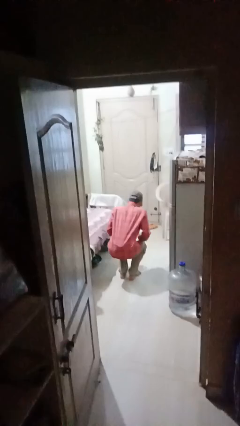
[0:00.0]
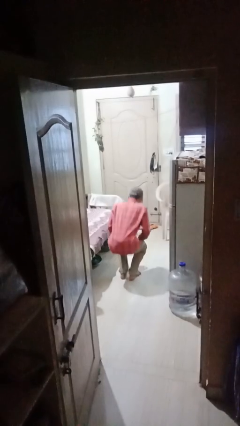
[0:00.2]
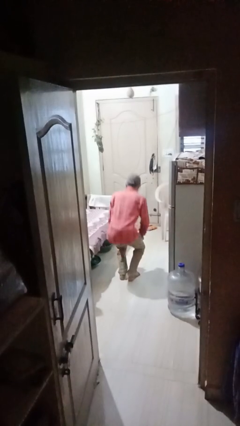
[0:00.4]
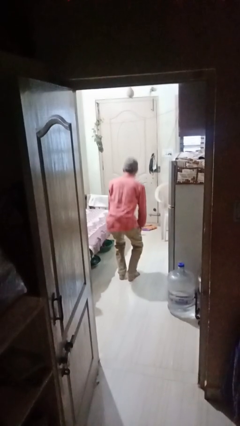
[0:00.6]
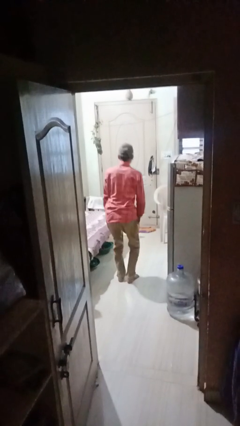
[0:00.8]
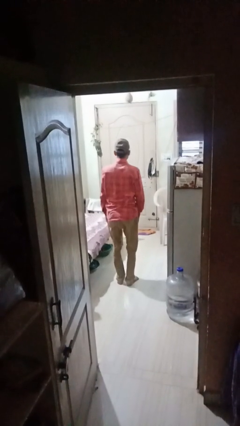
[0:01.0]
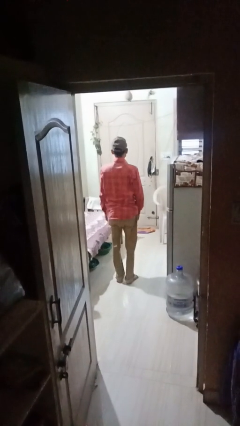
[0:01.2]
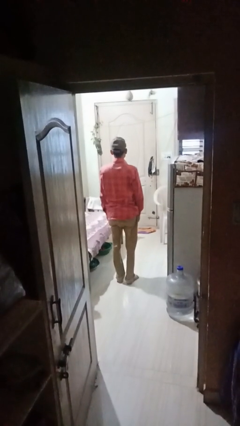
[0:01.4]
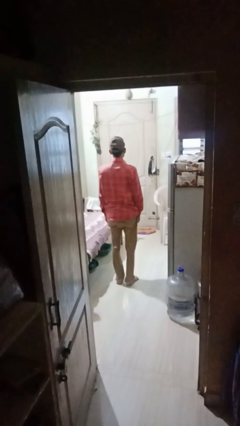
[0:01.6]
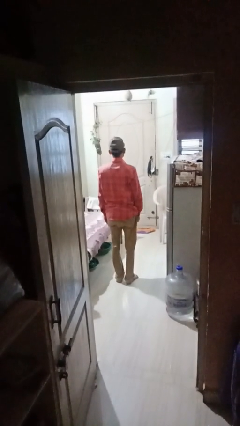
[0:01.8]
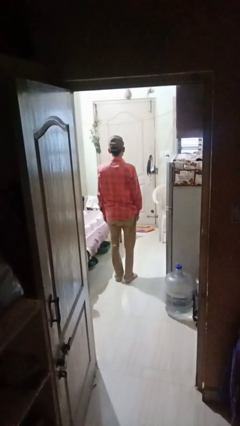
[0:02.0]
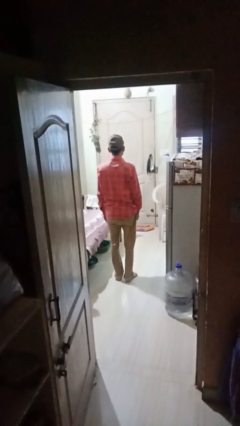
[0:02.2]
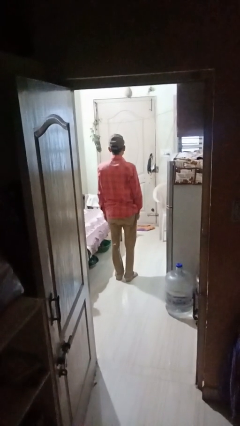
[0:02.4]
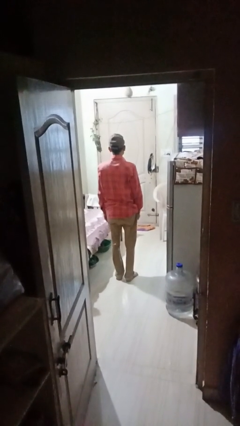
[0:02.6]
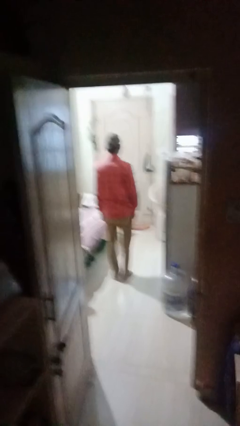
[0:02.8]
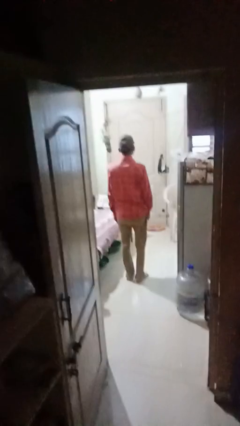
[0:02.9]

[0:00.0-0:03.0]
person stands up

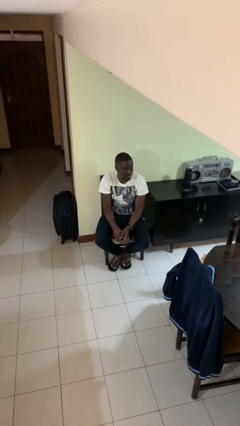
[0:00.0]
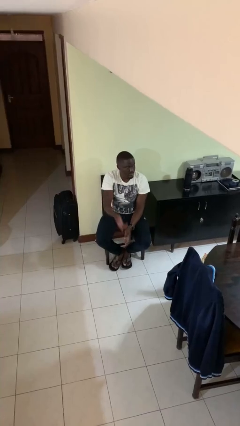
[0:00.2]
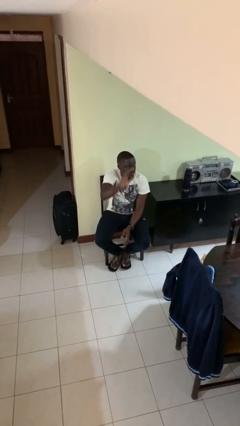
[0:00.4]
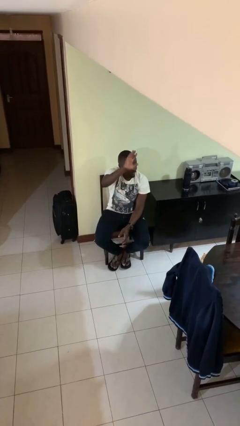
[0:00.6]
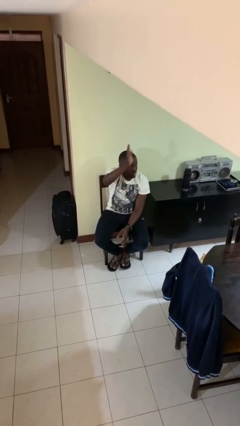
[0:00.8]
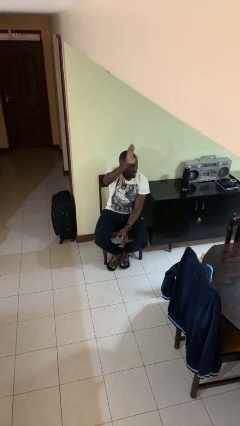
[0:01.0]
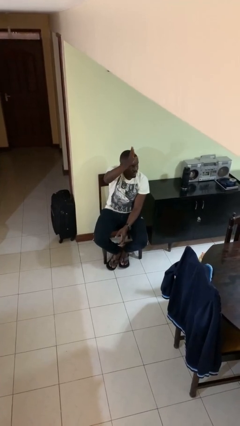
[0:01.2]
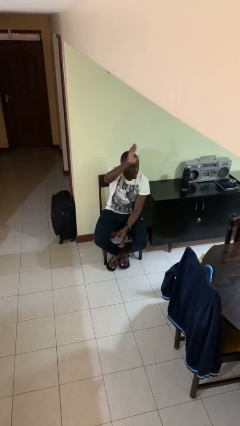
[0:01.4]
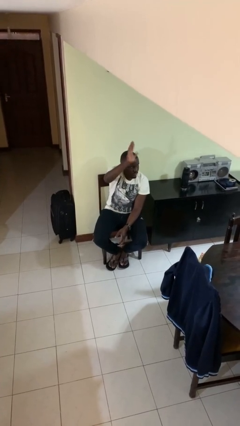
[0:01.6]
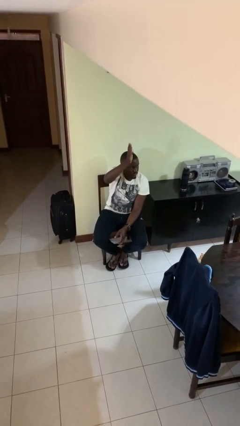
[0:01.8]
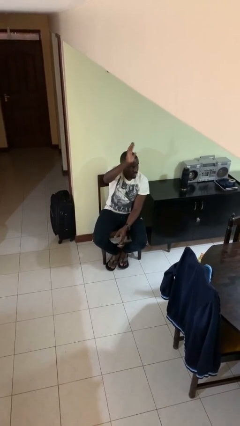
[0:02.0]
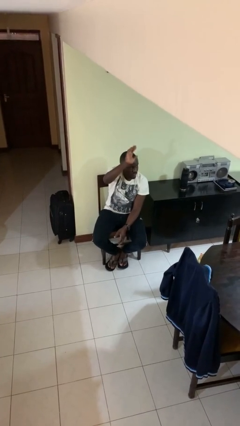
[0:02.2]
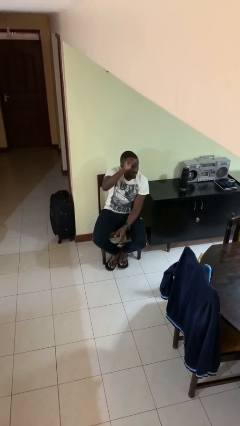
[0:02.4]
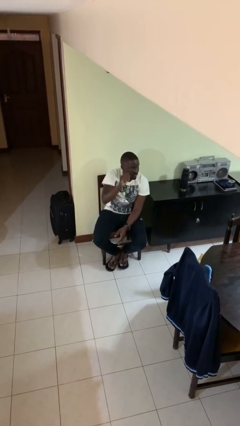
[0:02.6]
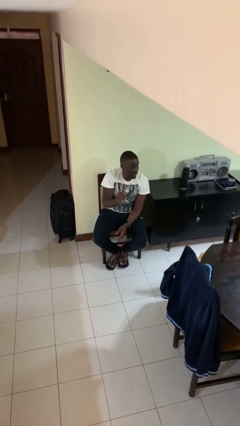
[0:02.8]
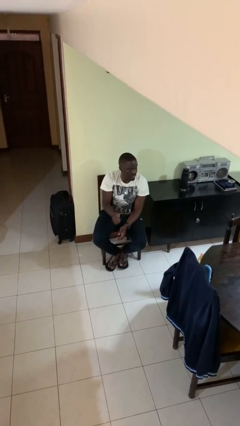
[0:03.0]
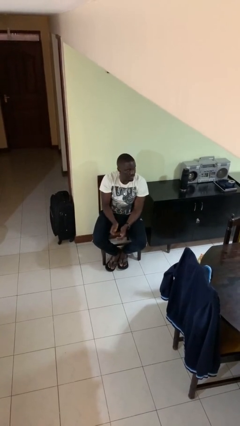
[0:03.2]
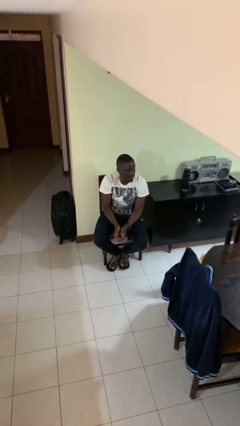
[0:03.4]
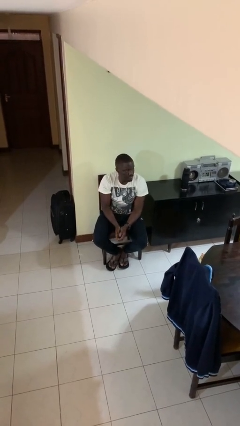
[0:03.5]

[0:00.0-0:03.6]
person waves at person

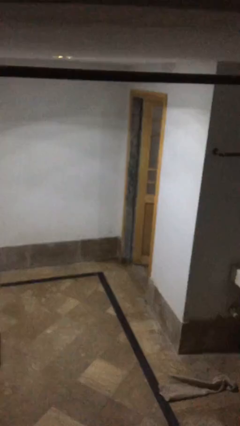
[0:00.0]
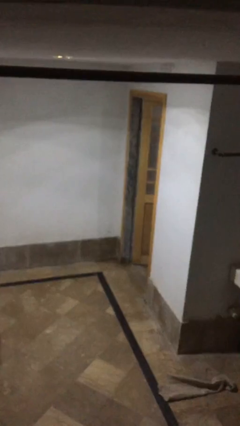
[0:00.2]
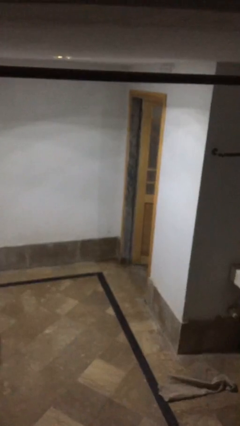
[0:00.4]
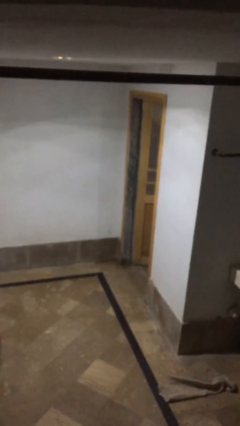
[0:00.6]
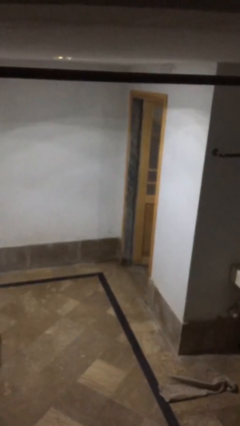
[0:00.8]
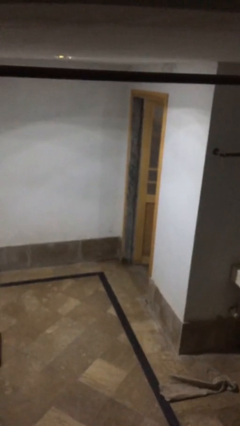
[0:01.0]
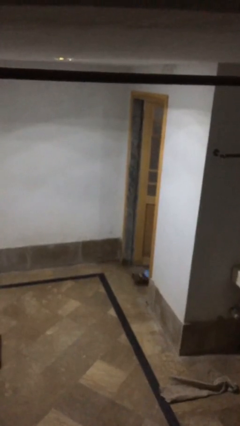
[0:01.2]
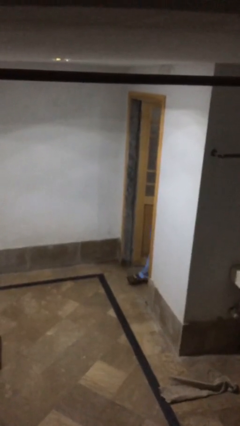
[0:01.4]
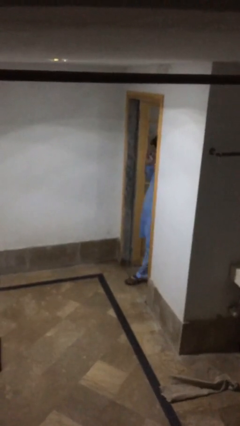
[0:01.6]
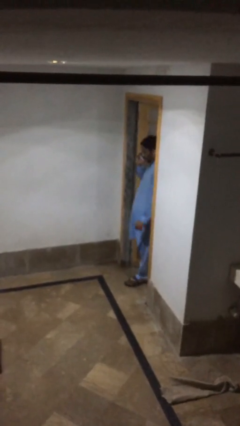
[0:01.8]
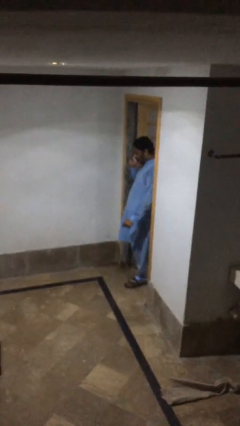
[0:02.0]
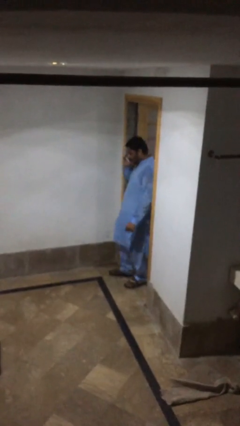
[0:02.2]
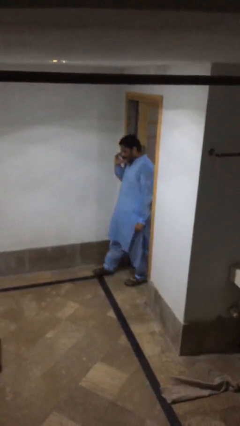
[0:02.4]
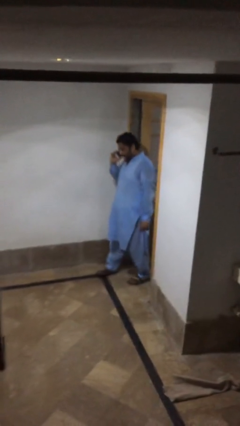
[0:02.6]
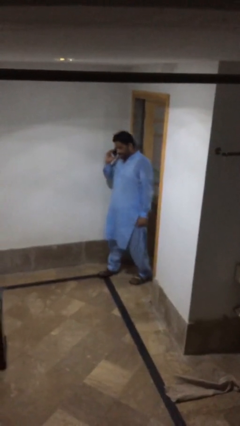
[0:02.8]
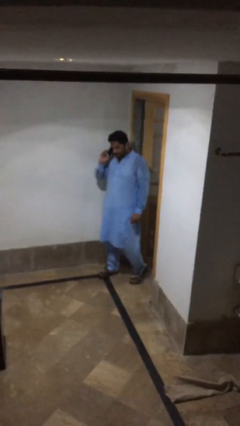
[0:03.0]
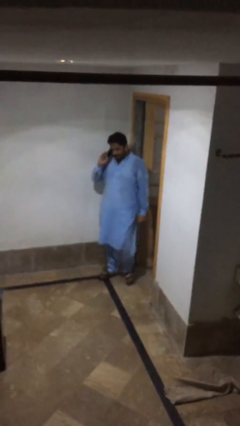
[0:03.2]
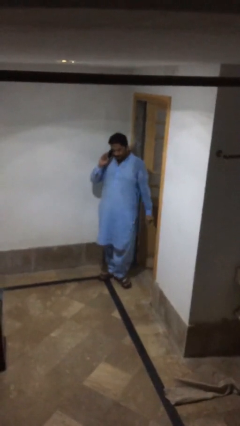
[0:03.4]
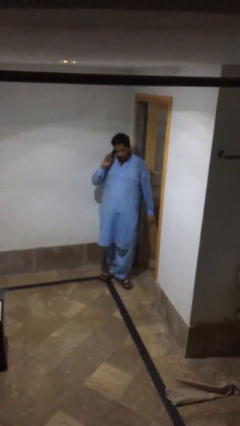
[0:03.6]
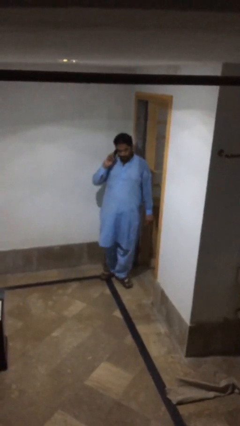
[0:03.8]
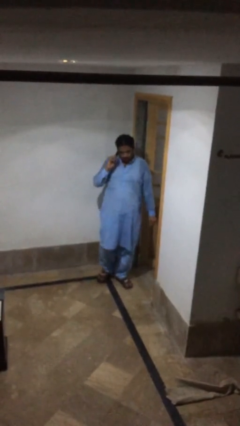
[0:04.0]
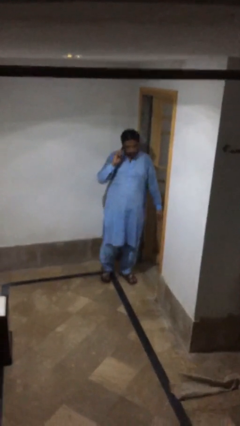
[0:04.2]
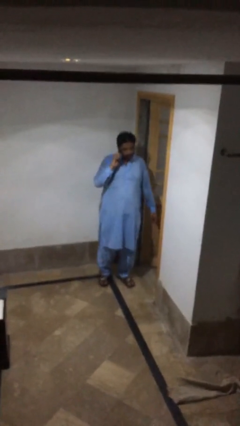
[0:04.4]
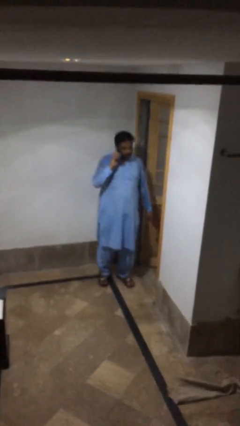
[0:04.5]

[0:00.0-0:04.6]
person enters scene through structure

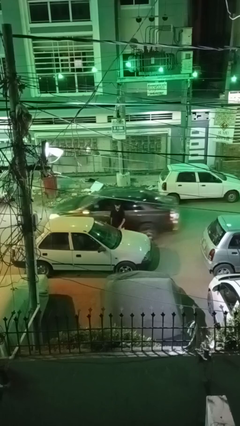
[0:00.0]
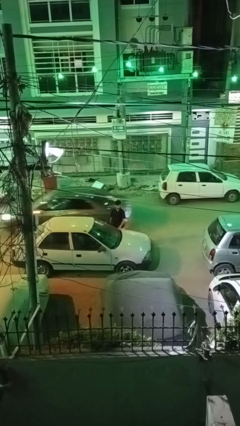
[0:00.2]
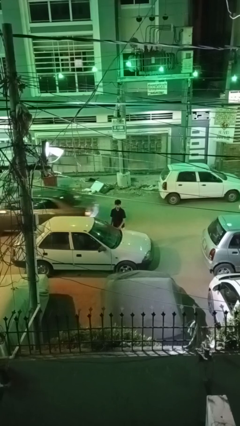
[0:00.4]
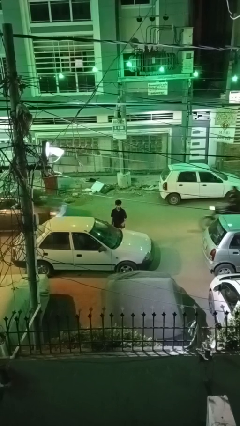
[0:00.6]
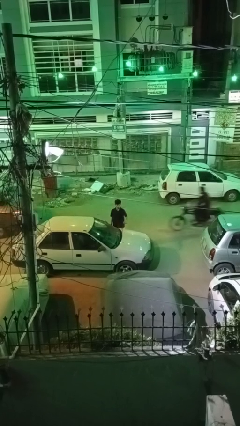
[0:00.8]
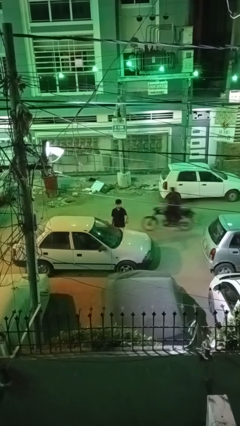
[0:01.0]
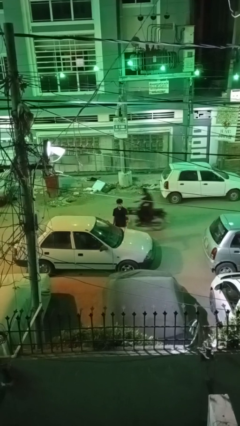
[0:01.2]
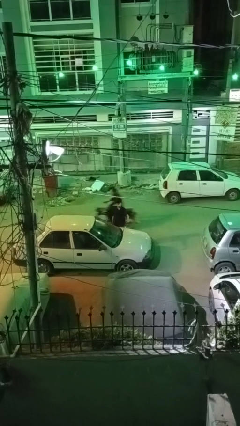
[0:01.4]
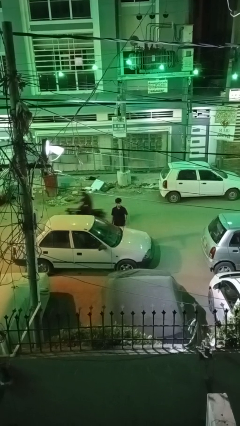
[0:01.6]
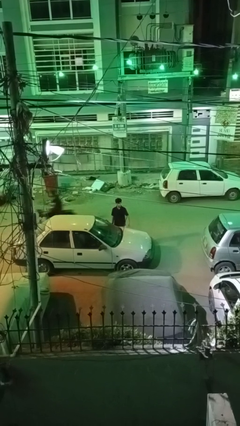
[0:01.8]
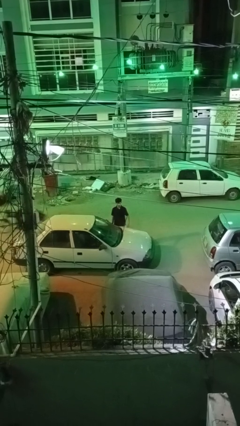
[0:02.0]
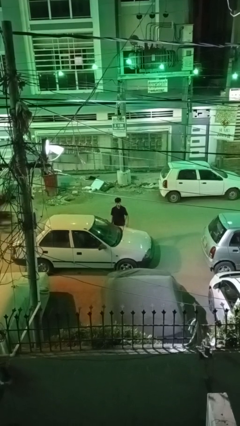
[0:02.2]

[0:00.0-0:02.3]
person flips up car wipers

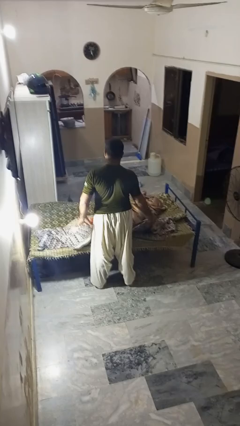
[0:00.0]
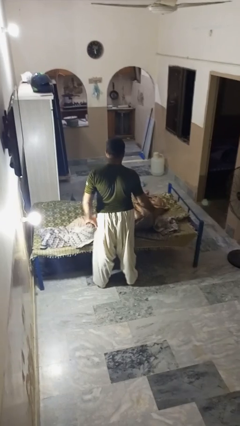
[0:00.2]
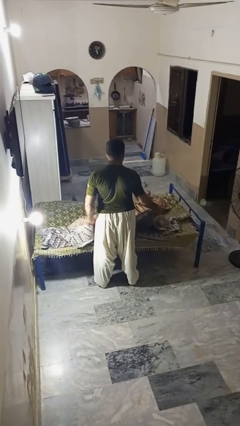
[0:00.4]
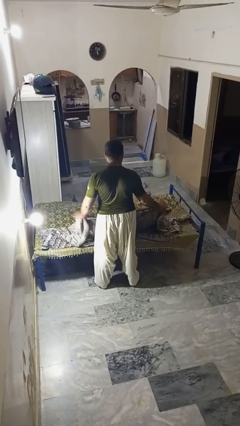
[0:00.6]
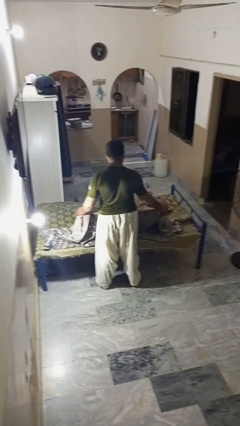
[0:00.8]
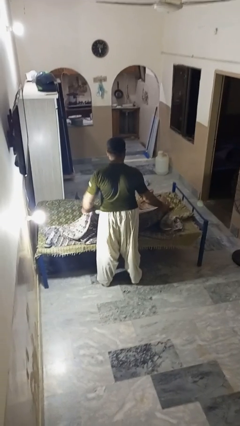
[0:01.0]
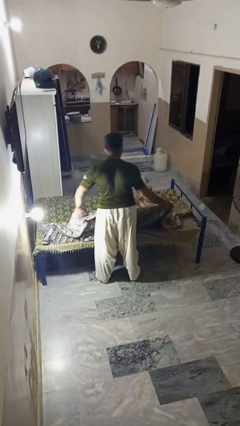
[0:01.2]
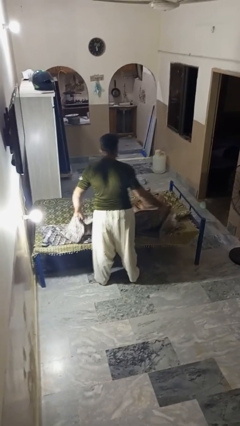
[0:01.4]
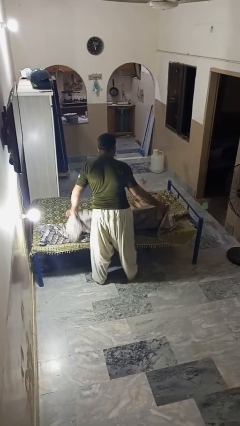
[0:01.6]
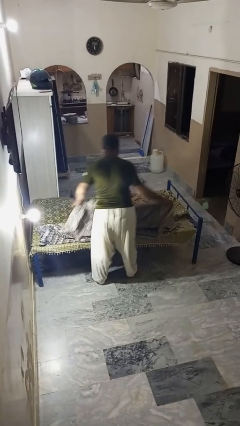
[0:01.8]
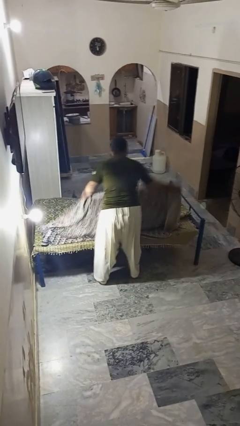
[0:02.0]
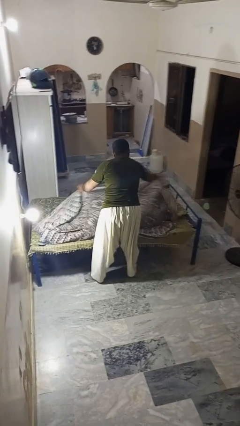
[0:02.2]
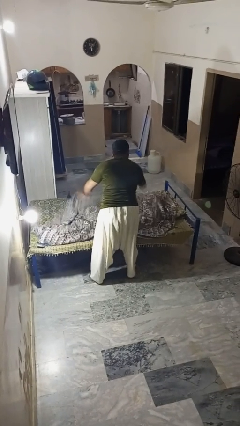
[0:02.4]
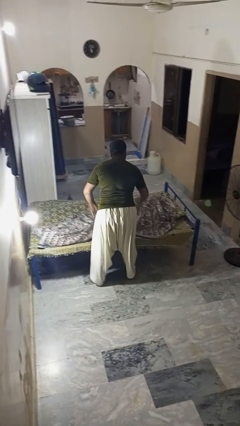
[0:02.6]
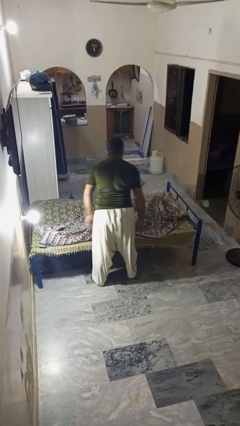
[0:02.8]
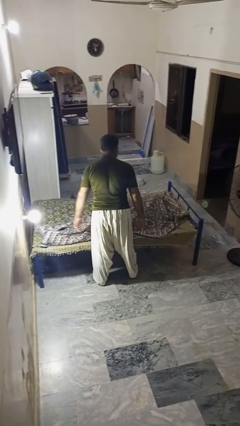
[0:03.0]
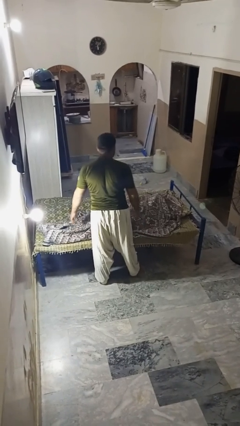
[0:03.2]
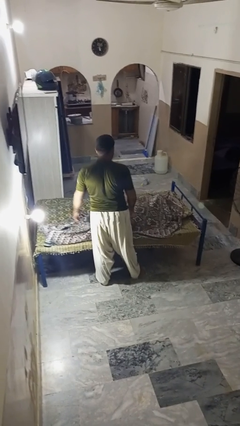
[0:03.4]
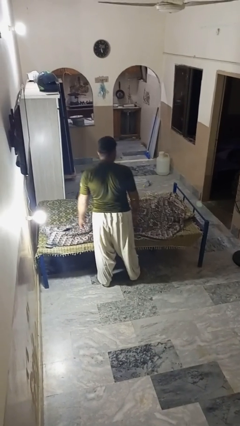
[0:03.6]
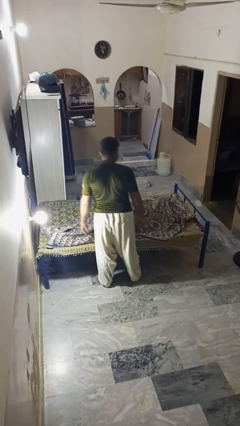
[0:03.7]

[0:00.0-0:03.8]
person covers friend with blanket

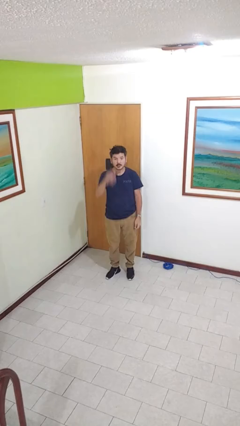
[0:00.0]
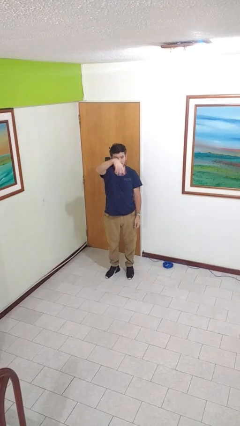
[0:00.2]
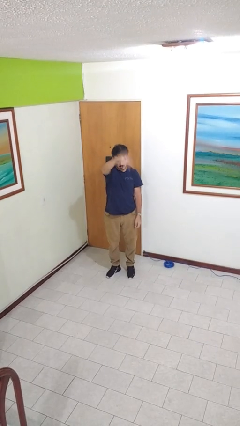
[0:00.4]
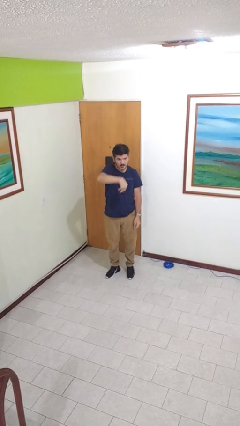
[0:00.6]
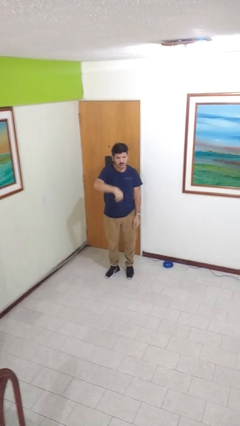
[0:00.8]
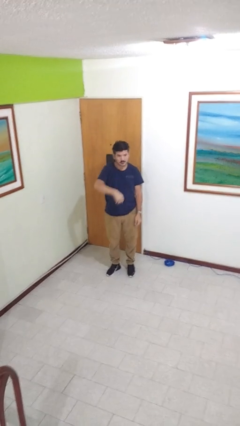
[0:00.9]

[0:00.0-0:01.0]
person gestures come here
